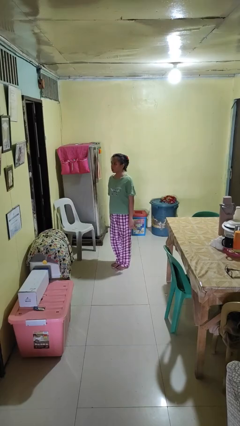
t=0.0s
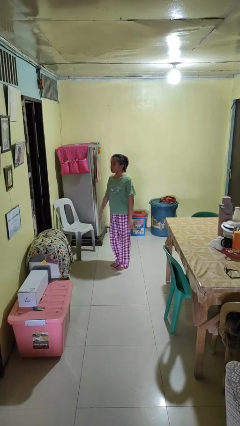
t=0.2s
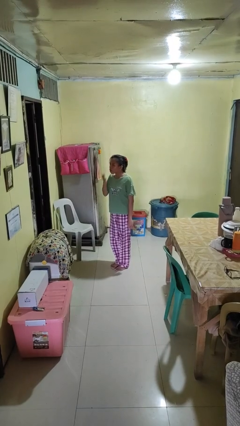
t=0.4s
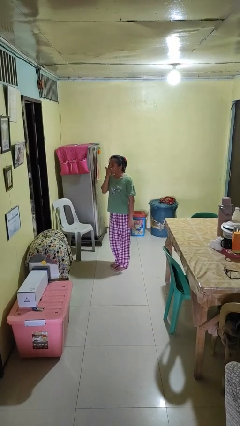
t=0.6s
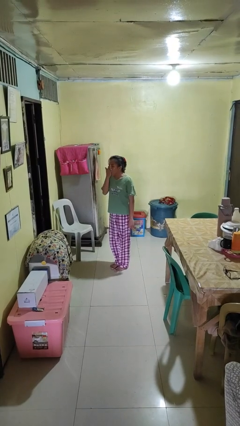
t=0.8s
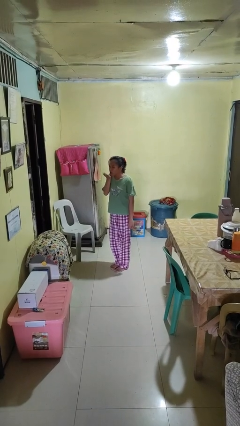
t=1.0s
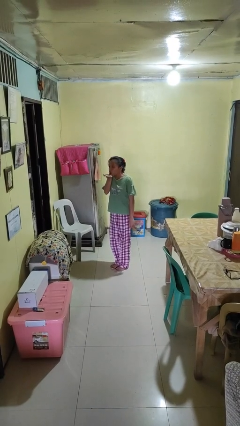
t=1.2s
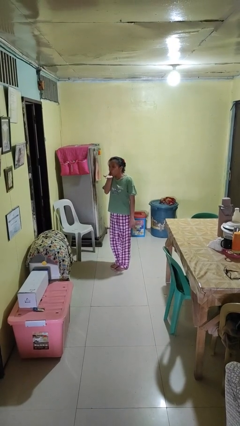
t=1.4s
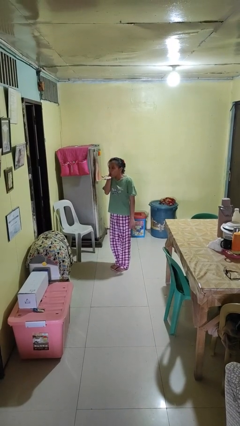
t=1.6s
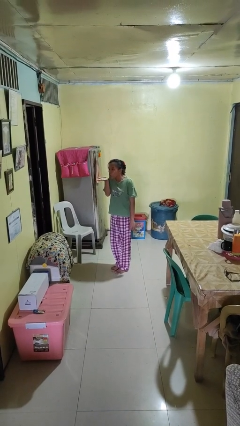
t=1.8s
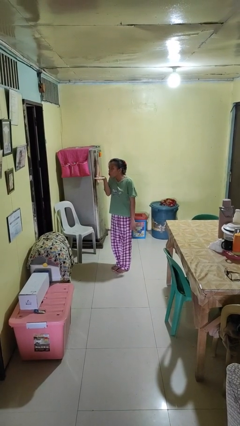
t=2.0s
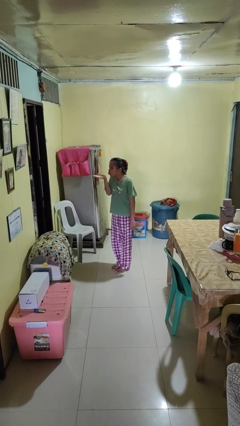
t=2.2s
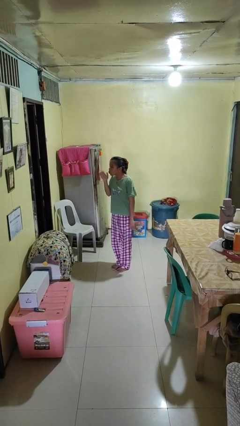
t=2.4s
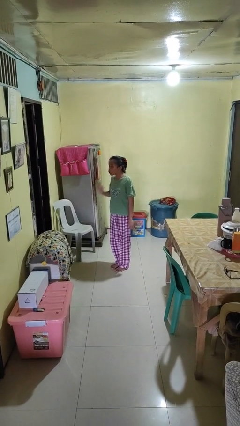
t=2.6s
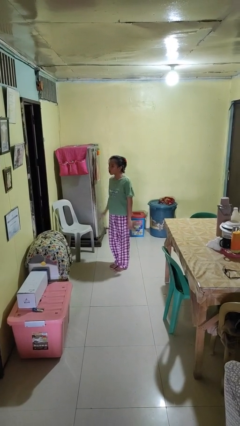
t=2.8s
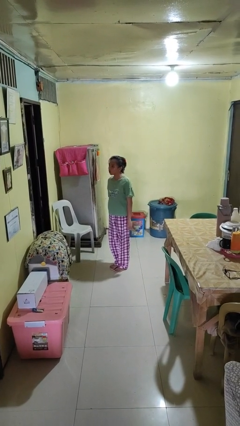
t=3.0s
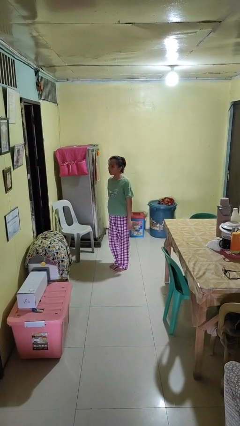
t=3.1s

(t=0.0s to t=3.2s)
person gestures blow kiss

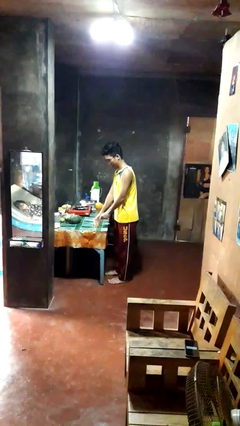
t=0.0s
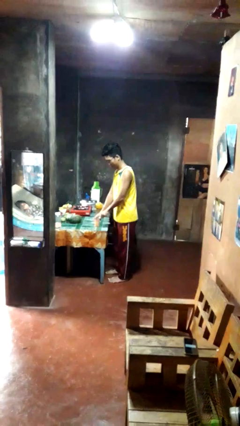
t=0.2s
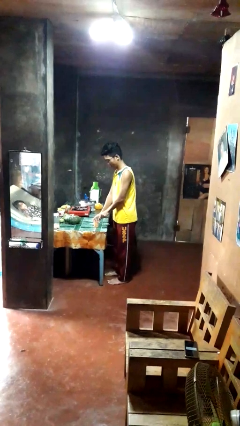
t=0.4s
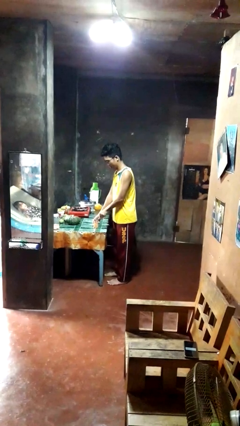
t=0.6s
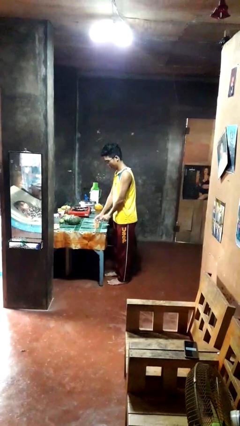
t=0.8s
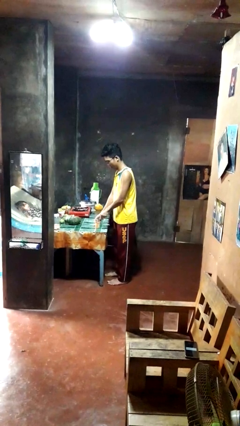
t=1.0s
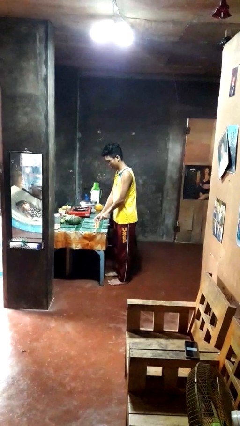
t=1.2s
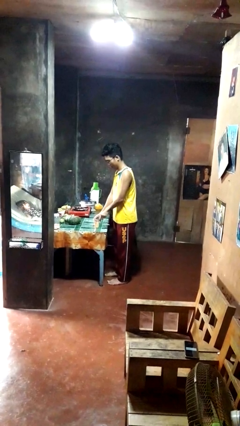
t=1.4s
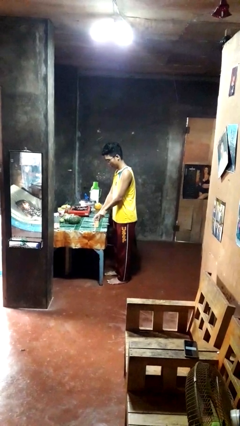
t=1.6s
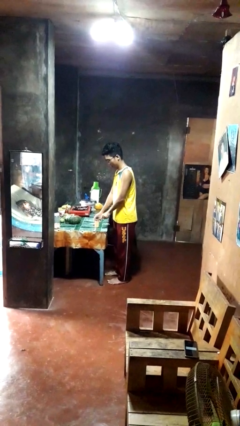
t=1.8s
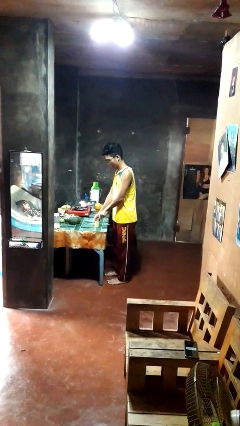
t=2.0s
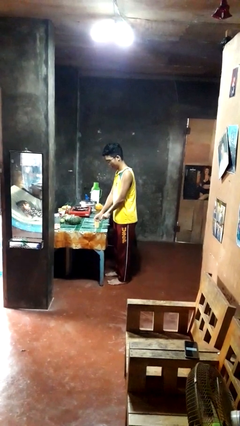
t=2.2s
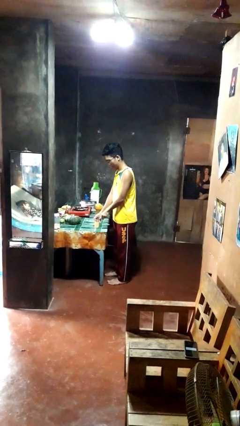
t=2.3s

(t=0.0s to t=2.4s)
person opens can with can opener

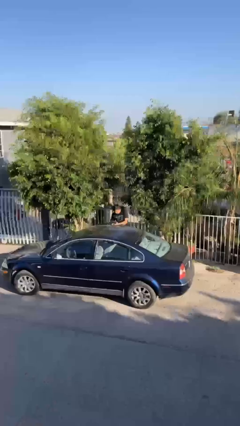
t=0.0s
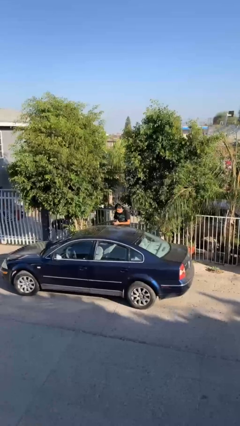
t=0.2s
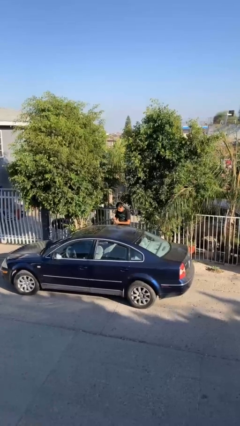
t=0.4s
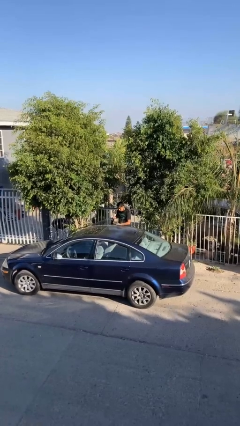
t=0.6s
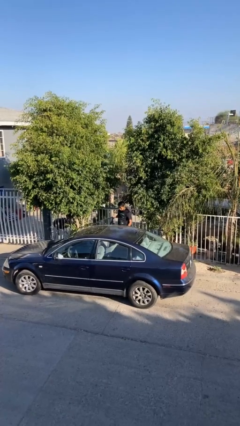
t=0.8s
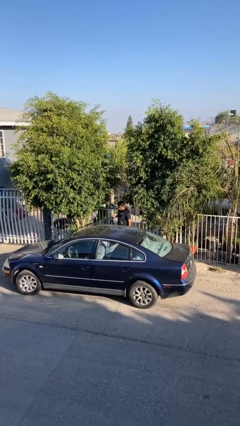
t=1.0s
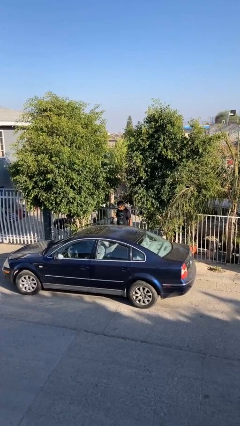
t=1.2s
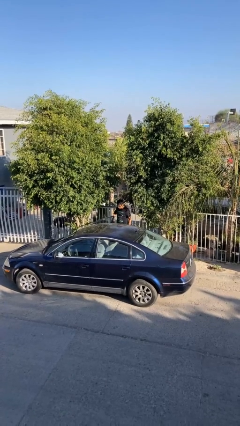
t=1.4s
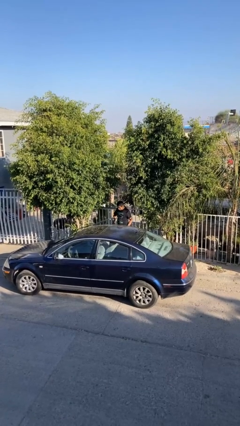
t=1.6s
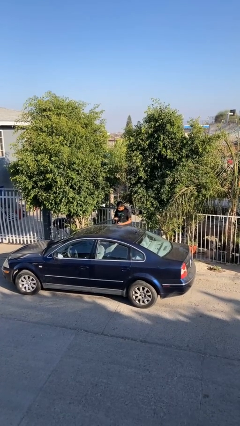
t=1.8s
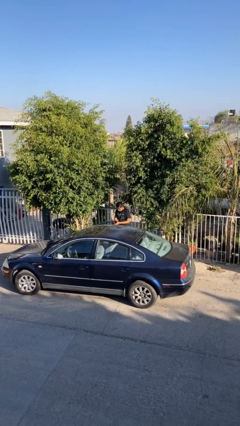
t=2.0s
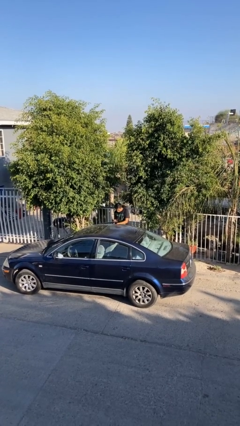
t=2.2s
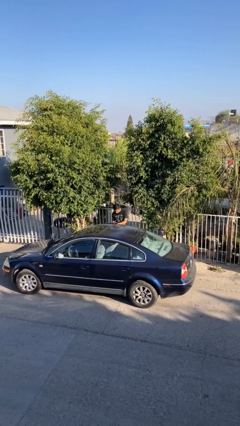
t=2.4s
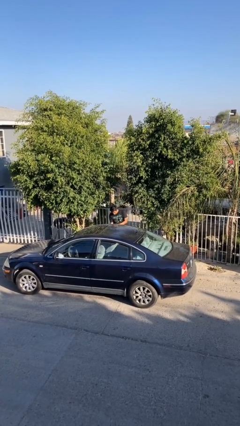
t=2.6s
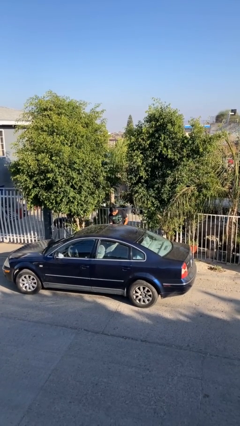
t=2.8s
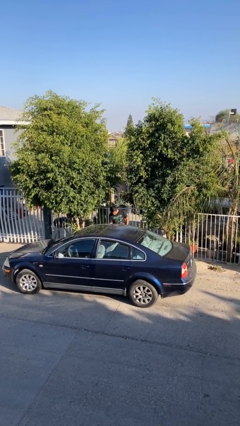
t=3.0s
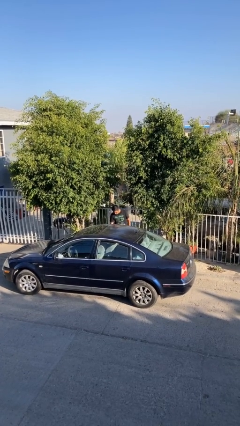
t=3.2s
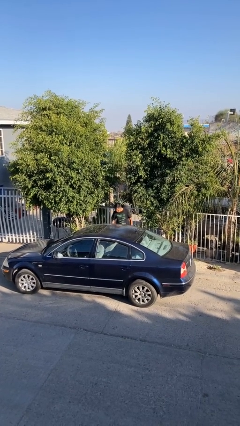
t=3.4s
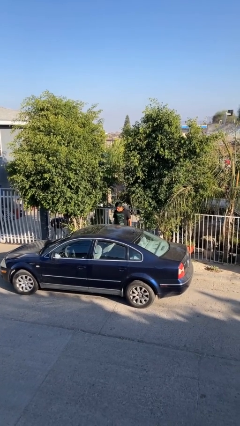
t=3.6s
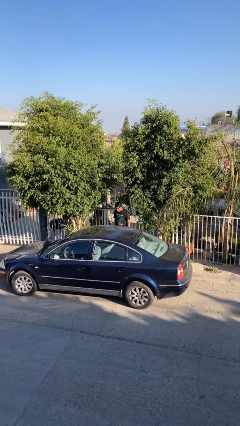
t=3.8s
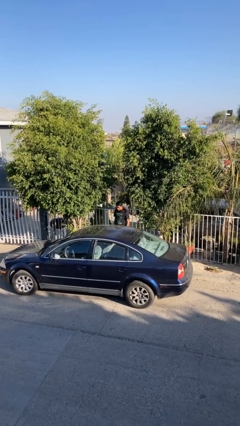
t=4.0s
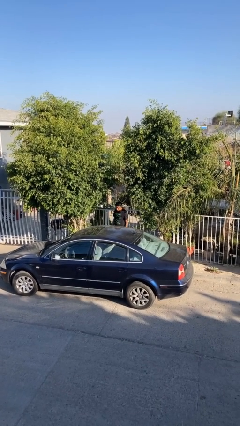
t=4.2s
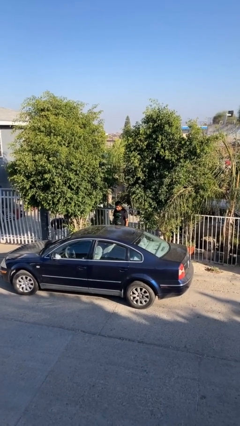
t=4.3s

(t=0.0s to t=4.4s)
person opens car door

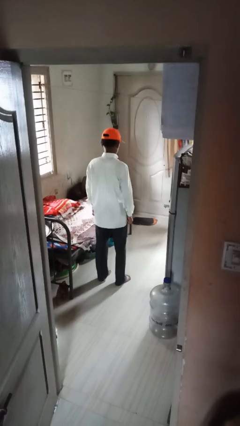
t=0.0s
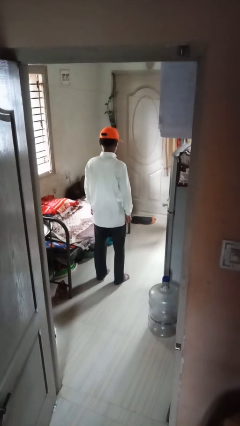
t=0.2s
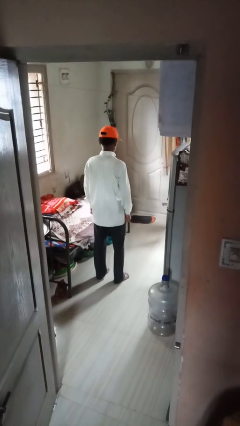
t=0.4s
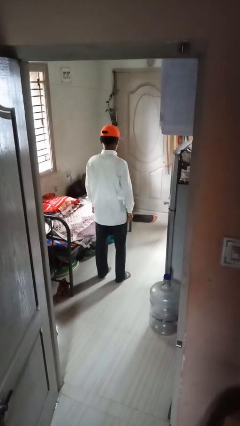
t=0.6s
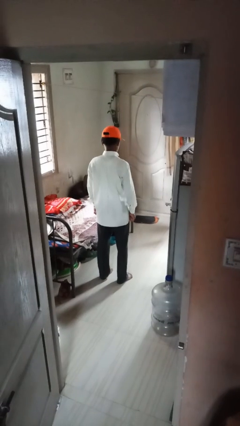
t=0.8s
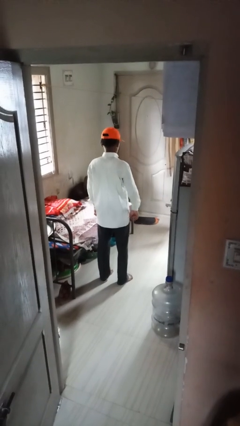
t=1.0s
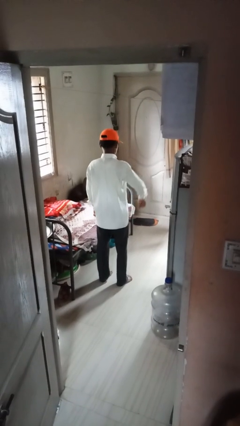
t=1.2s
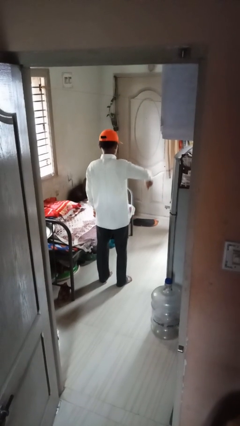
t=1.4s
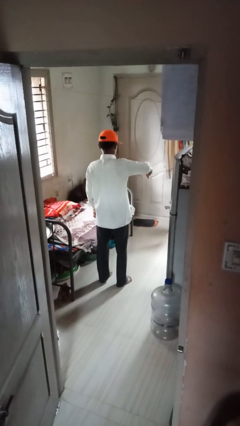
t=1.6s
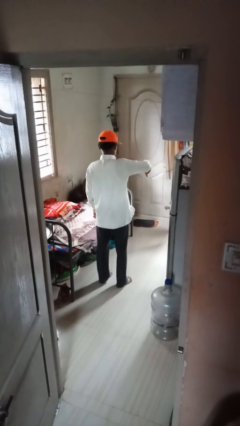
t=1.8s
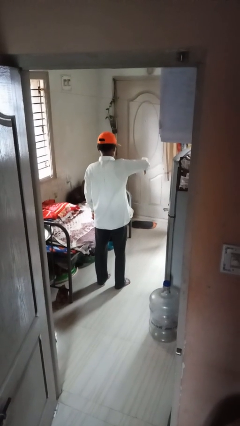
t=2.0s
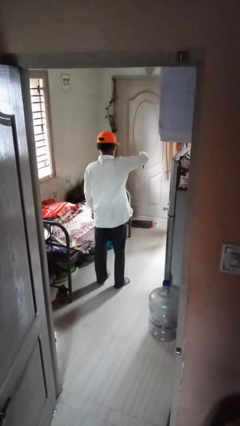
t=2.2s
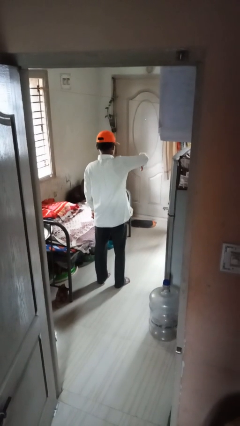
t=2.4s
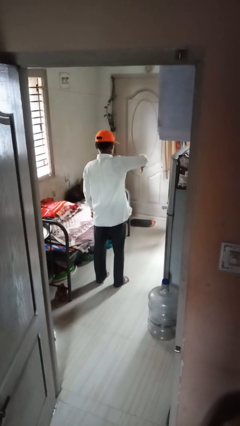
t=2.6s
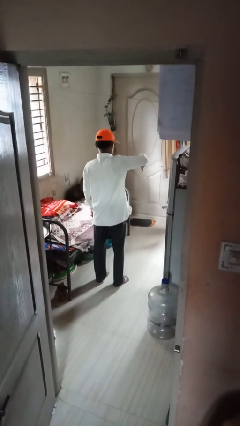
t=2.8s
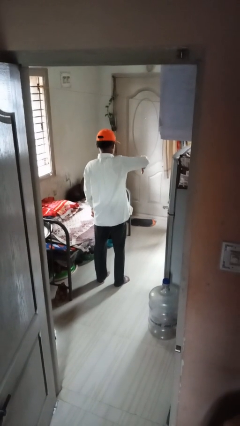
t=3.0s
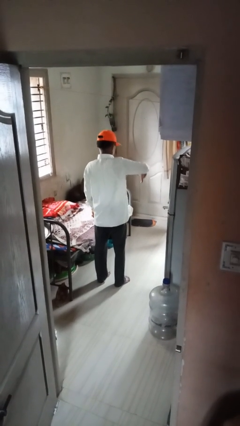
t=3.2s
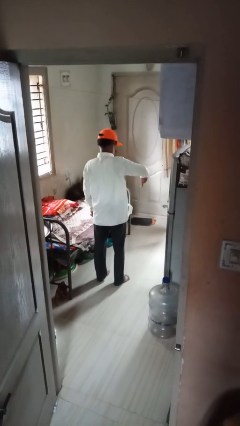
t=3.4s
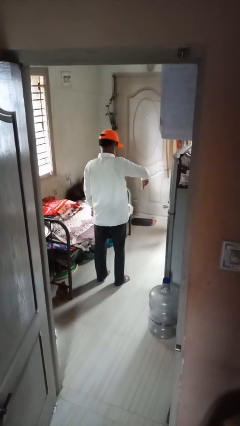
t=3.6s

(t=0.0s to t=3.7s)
person gestures thumbs down

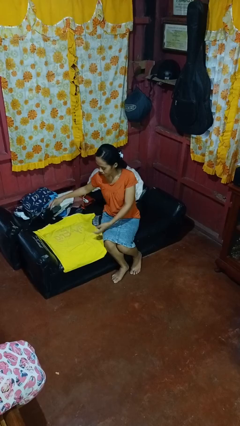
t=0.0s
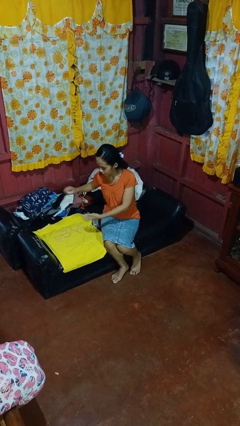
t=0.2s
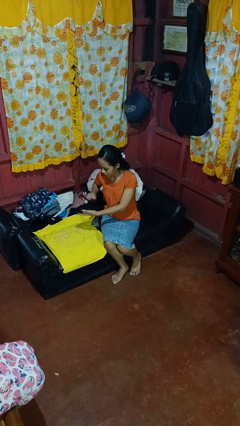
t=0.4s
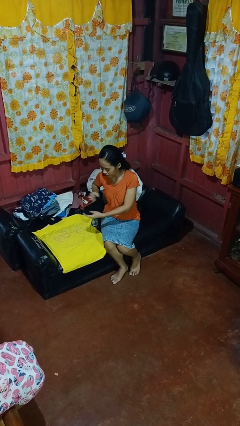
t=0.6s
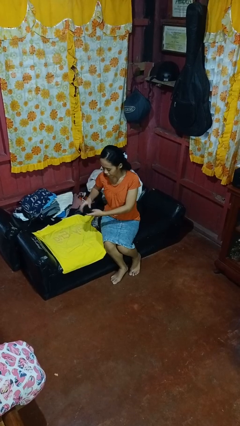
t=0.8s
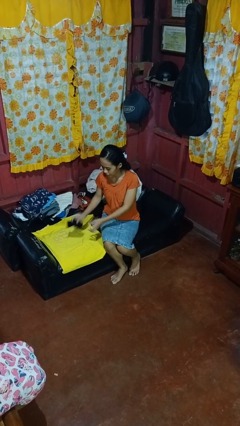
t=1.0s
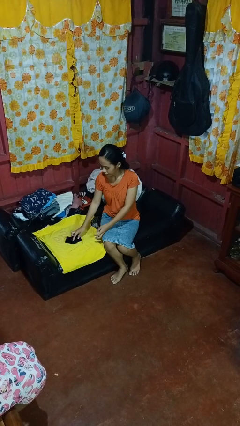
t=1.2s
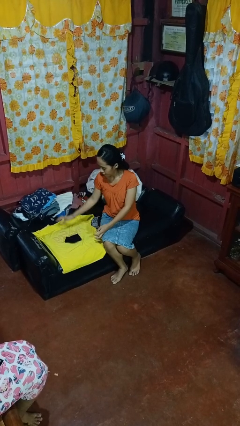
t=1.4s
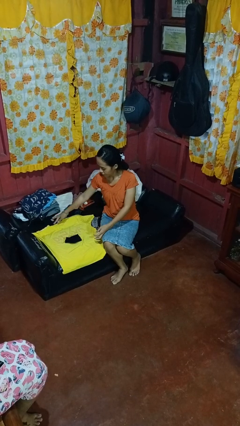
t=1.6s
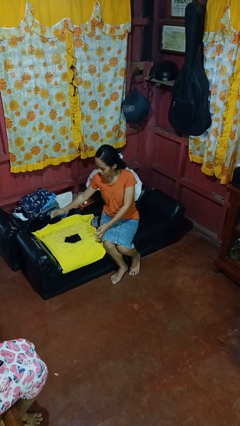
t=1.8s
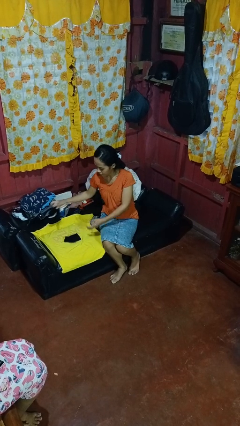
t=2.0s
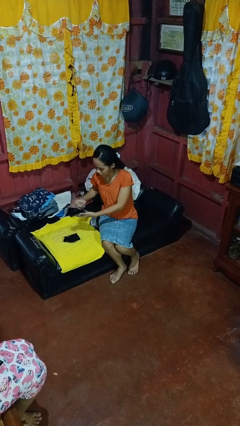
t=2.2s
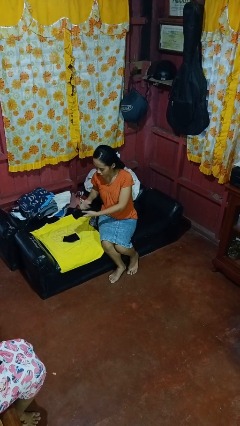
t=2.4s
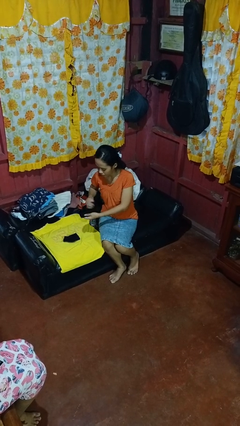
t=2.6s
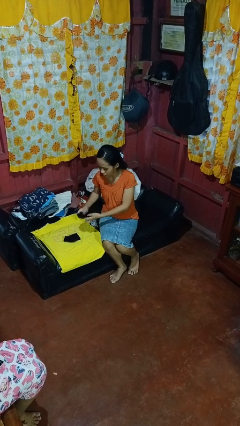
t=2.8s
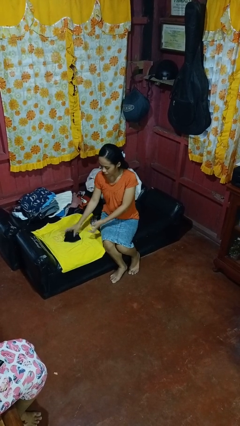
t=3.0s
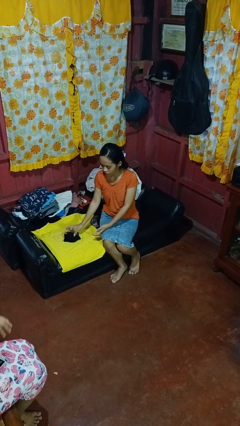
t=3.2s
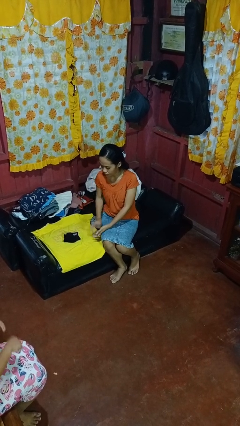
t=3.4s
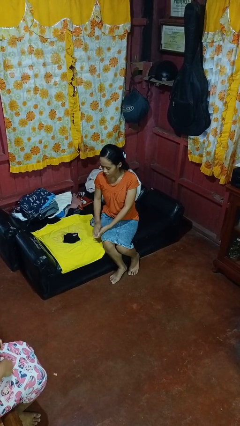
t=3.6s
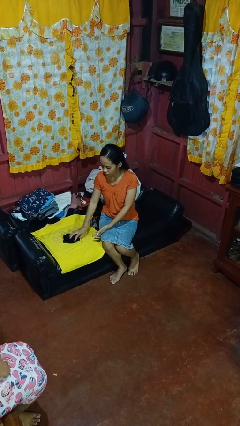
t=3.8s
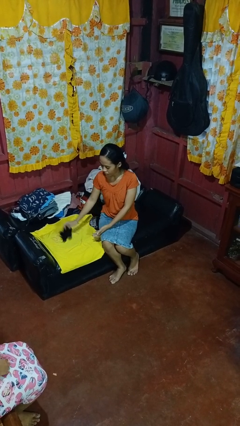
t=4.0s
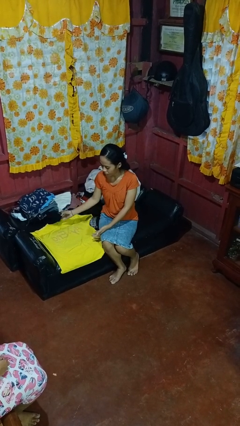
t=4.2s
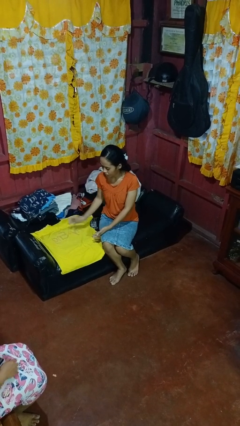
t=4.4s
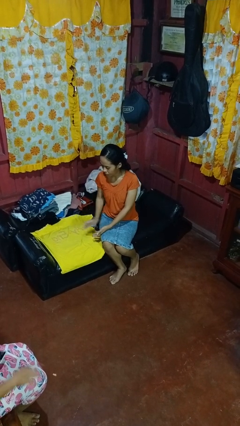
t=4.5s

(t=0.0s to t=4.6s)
person folds socks
